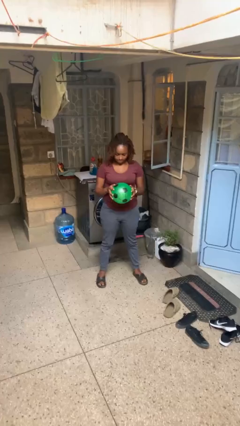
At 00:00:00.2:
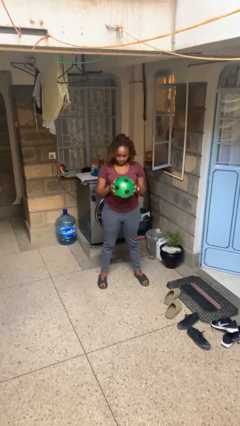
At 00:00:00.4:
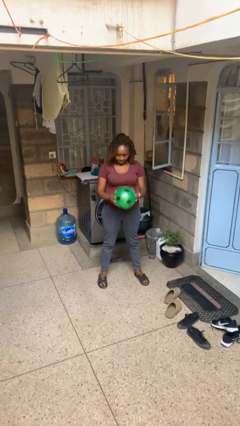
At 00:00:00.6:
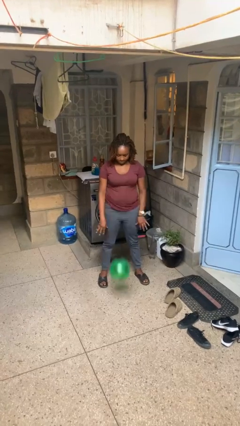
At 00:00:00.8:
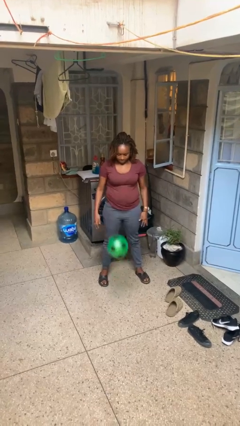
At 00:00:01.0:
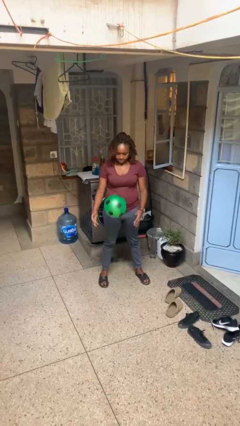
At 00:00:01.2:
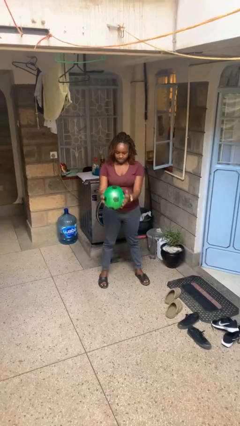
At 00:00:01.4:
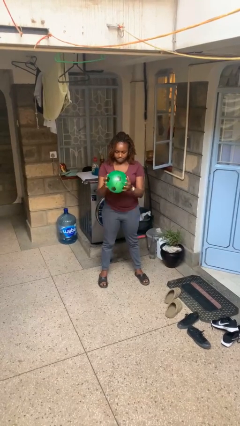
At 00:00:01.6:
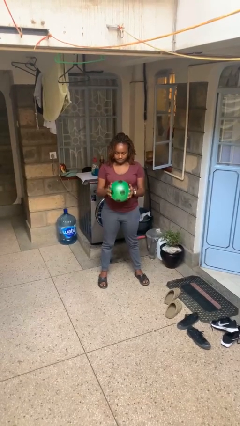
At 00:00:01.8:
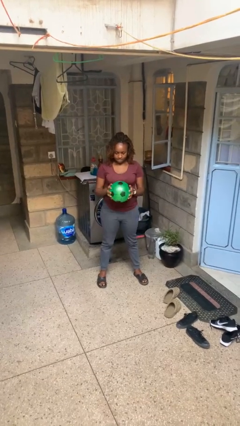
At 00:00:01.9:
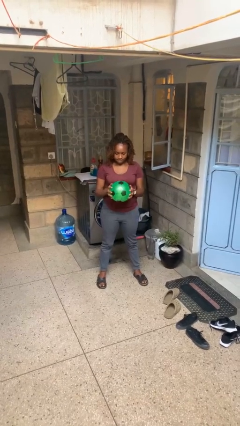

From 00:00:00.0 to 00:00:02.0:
person bounces ball on floor

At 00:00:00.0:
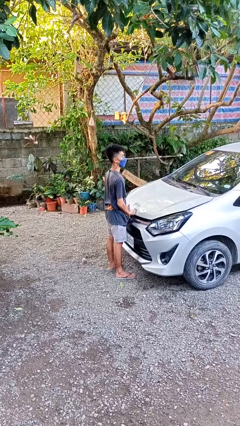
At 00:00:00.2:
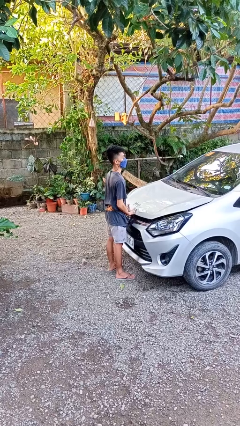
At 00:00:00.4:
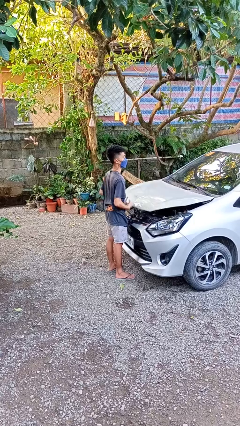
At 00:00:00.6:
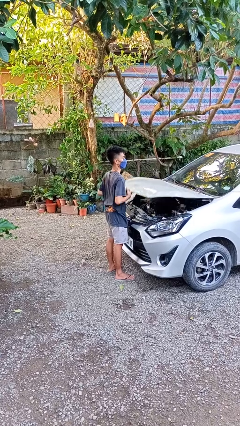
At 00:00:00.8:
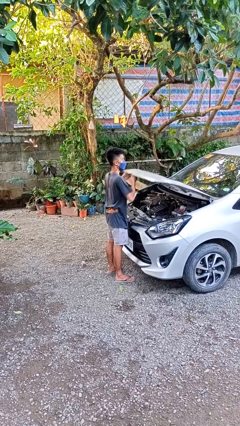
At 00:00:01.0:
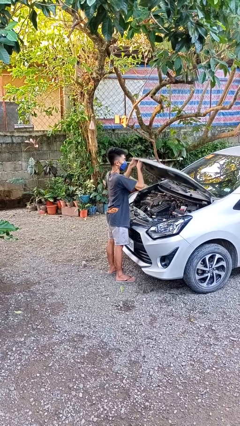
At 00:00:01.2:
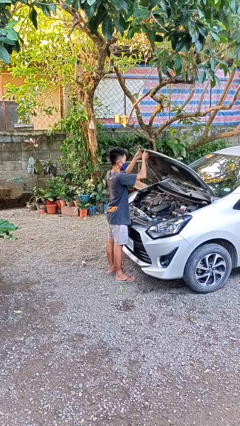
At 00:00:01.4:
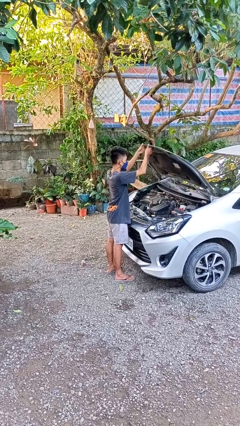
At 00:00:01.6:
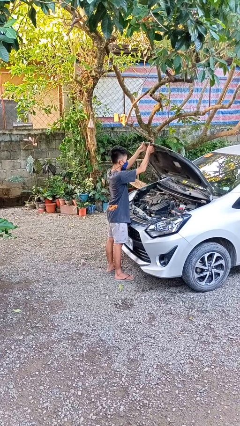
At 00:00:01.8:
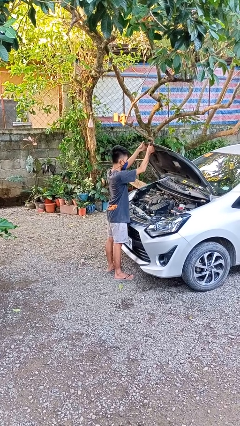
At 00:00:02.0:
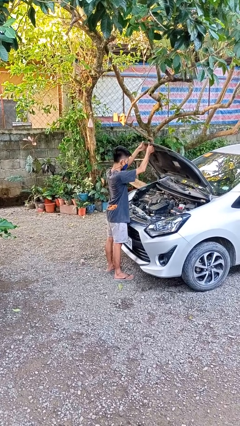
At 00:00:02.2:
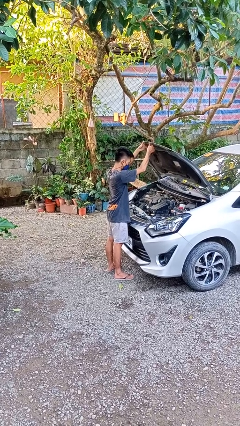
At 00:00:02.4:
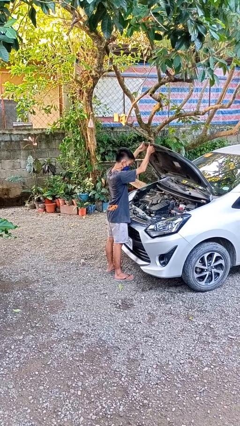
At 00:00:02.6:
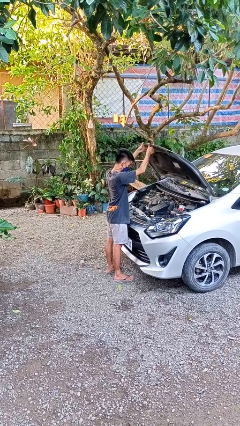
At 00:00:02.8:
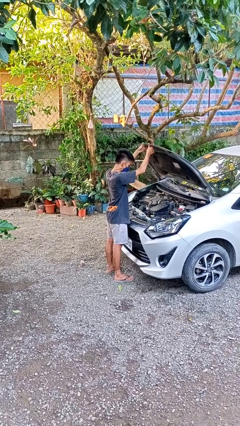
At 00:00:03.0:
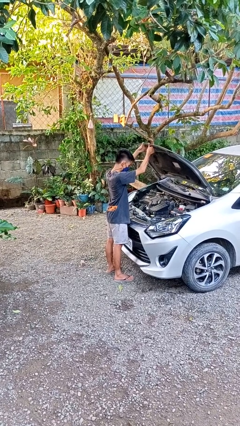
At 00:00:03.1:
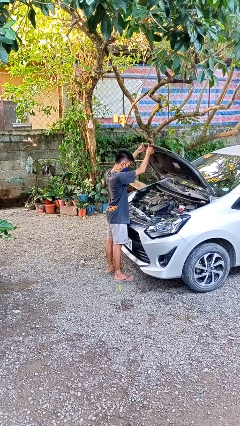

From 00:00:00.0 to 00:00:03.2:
person opens car hood

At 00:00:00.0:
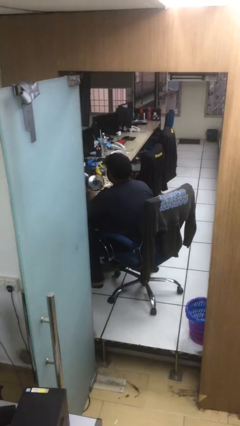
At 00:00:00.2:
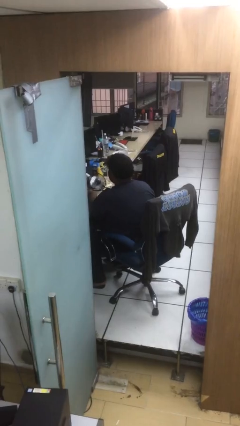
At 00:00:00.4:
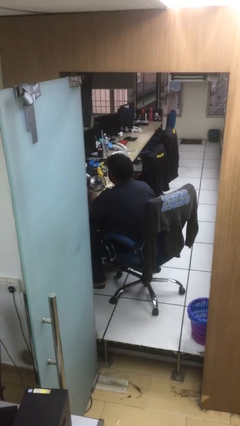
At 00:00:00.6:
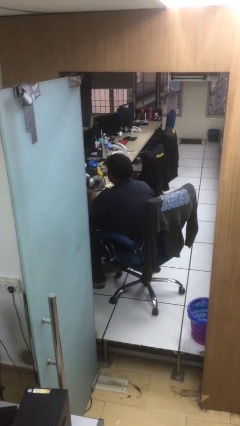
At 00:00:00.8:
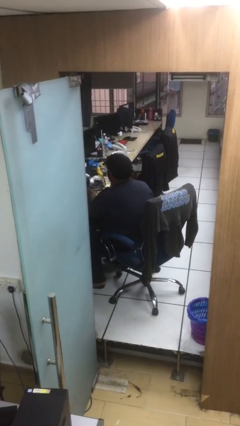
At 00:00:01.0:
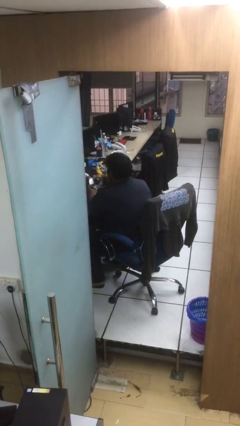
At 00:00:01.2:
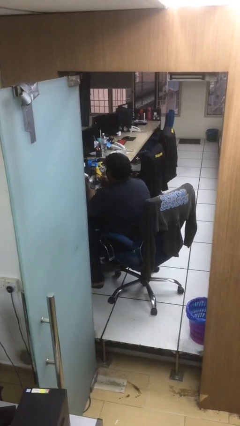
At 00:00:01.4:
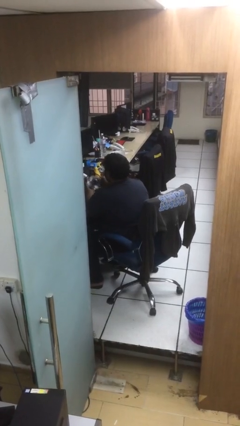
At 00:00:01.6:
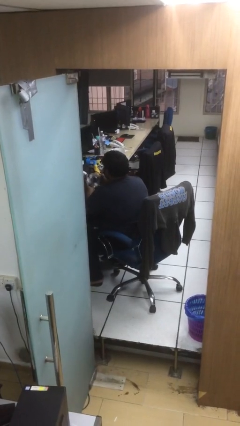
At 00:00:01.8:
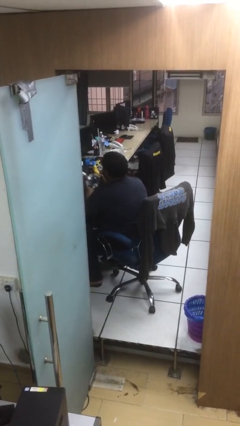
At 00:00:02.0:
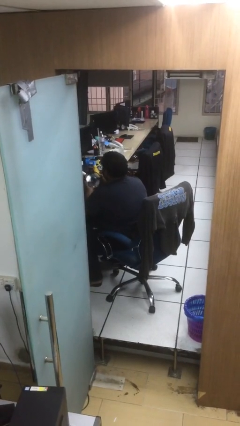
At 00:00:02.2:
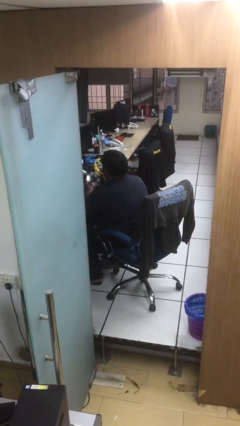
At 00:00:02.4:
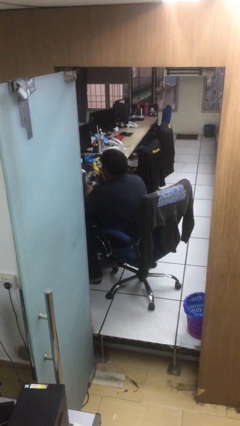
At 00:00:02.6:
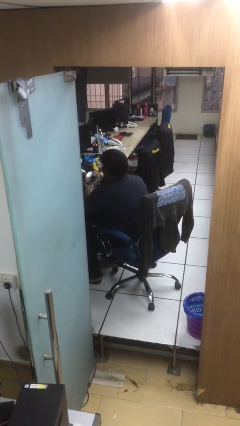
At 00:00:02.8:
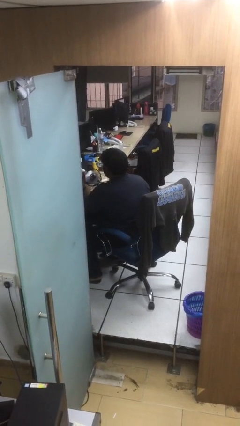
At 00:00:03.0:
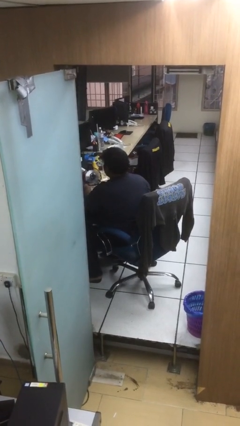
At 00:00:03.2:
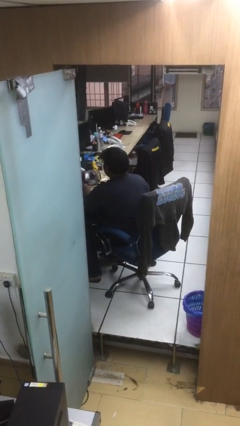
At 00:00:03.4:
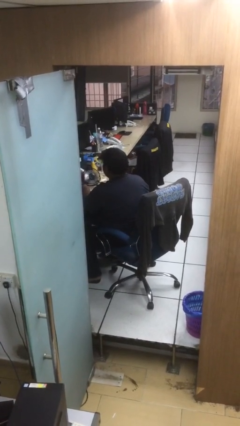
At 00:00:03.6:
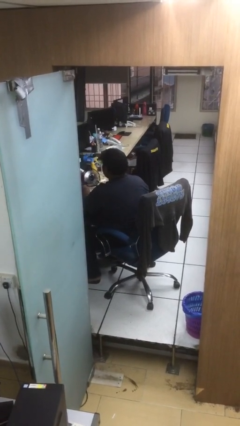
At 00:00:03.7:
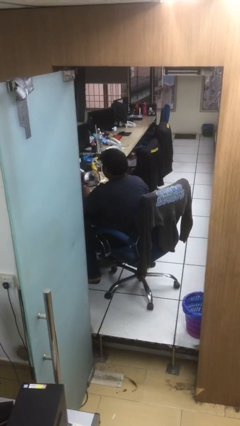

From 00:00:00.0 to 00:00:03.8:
person turns on fan

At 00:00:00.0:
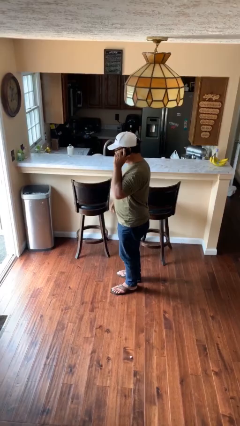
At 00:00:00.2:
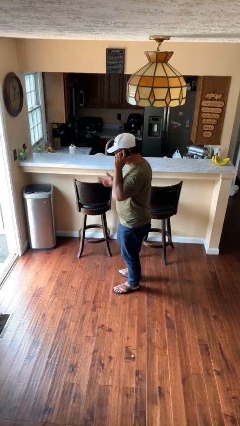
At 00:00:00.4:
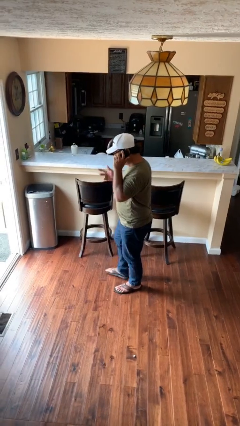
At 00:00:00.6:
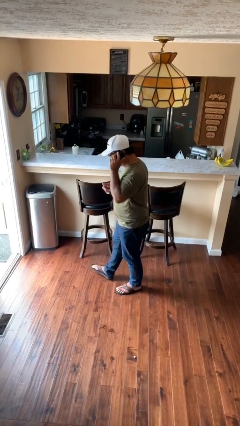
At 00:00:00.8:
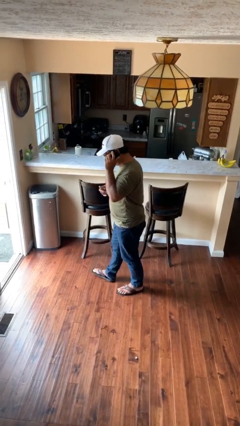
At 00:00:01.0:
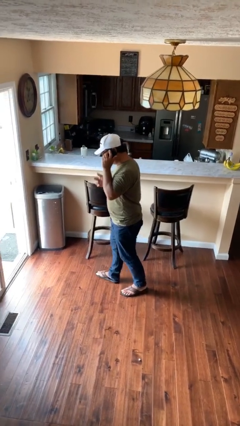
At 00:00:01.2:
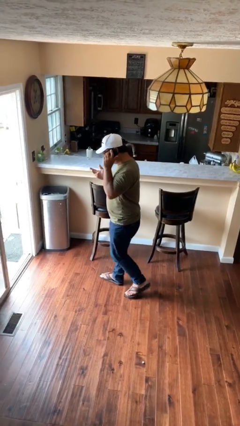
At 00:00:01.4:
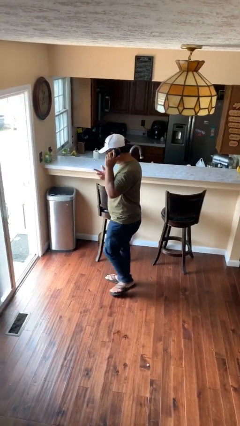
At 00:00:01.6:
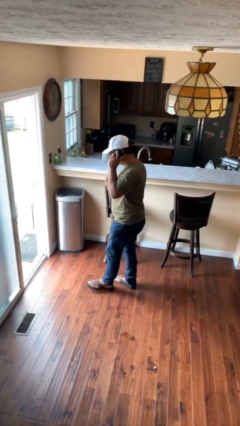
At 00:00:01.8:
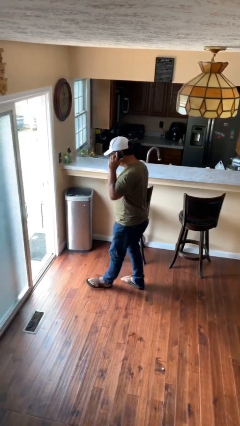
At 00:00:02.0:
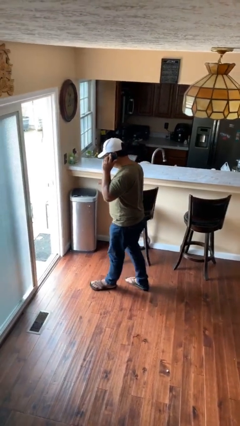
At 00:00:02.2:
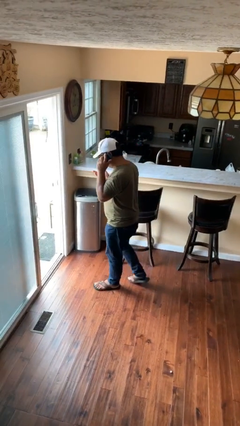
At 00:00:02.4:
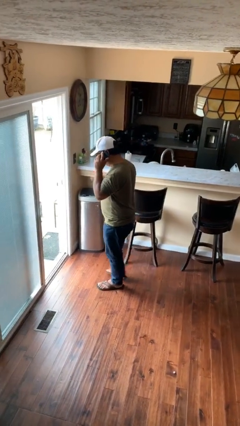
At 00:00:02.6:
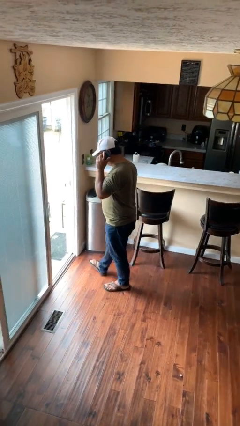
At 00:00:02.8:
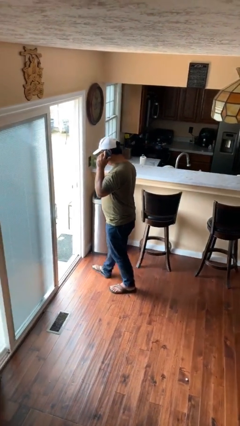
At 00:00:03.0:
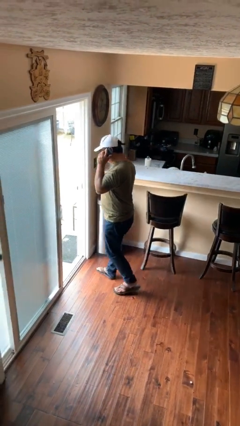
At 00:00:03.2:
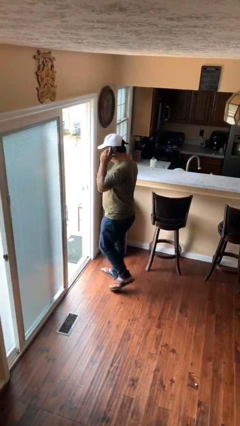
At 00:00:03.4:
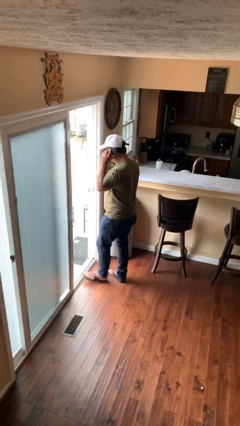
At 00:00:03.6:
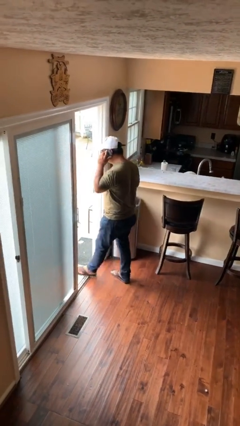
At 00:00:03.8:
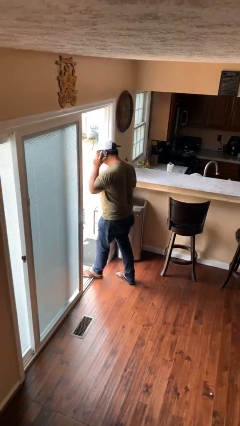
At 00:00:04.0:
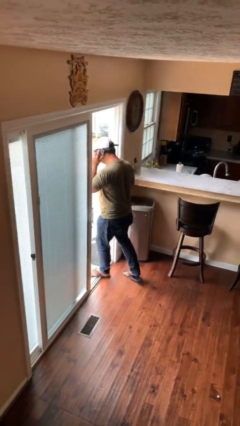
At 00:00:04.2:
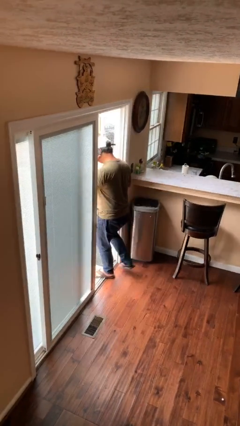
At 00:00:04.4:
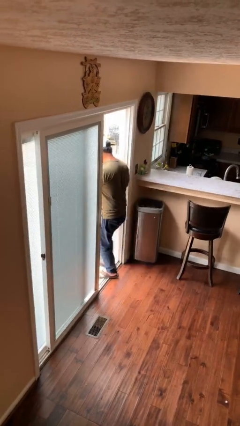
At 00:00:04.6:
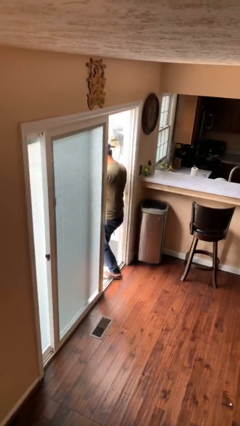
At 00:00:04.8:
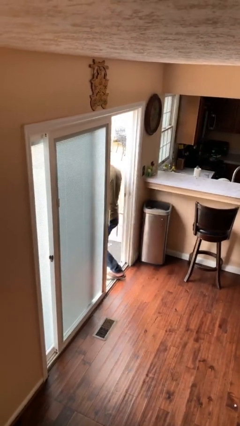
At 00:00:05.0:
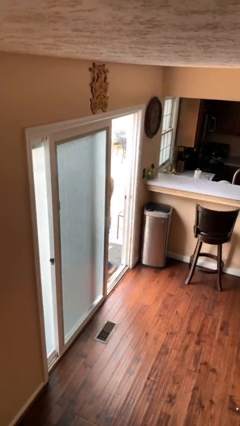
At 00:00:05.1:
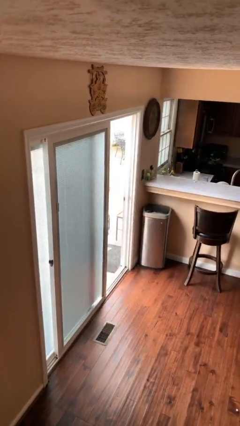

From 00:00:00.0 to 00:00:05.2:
person exits scene through structure

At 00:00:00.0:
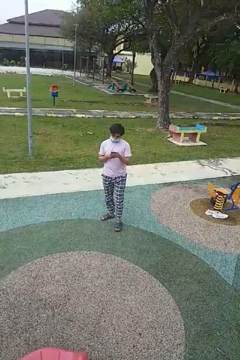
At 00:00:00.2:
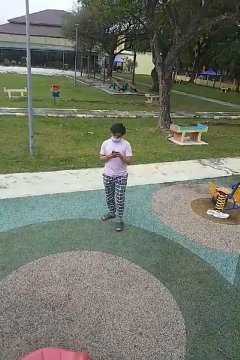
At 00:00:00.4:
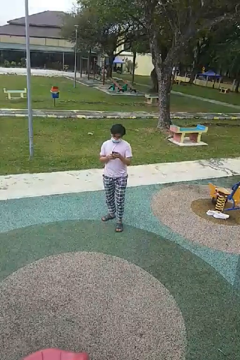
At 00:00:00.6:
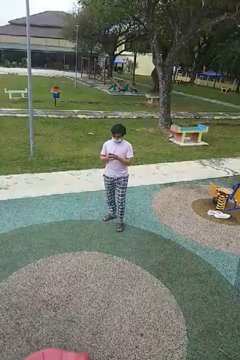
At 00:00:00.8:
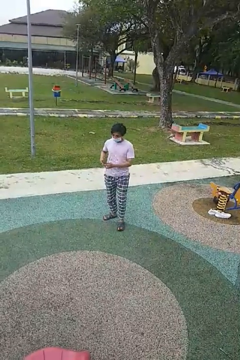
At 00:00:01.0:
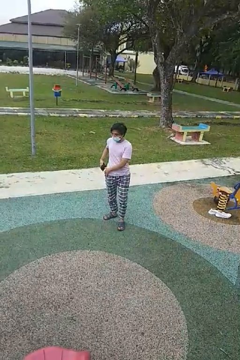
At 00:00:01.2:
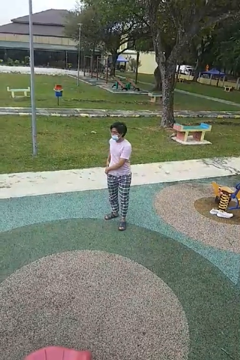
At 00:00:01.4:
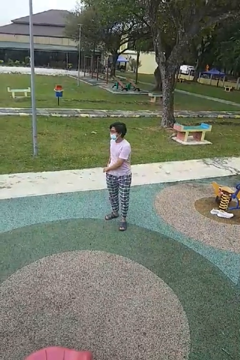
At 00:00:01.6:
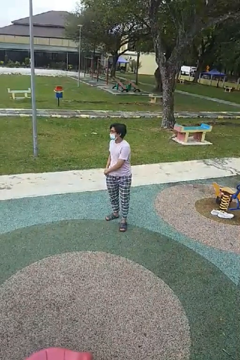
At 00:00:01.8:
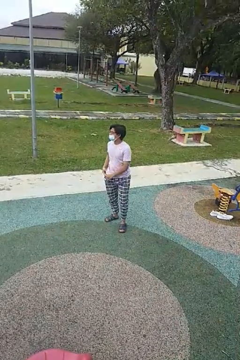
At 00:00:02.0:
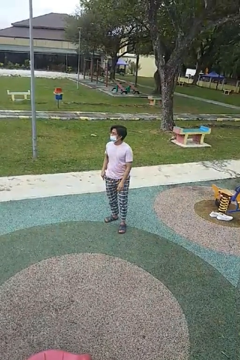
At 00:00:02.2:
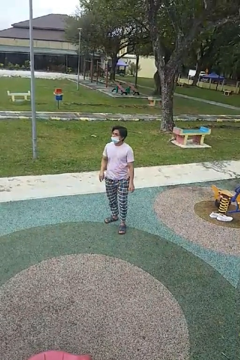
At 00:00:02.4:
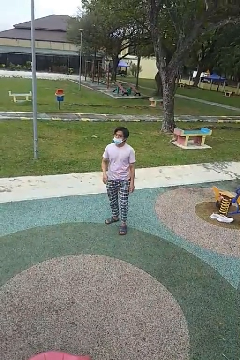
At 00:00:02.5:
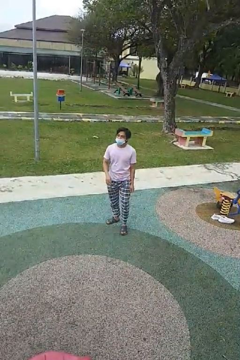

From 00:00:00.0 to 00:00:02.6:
person puts phone into pocket

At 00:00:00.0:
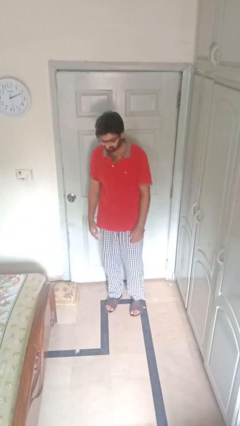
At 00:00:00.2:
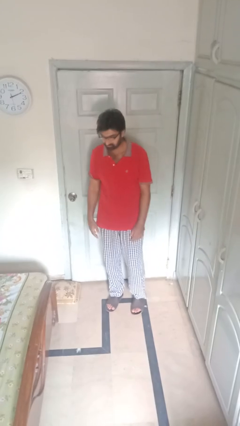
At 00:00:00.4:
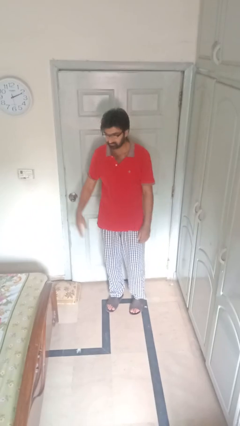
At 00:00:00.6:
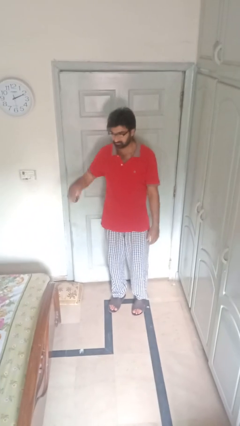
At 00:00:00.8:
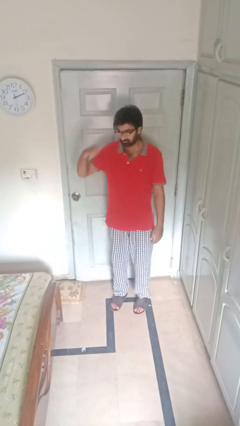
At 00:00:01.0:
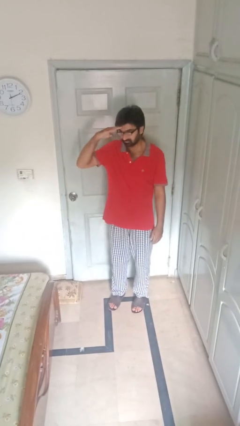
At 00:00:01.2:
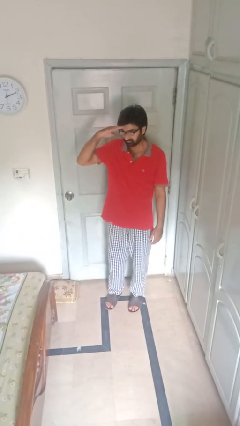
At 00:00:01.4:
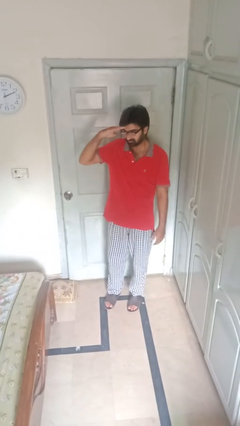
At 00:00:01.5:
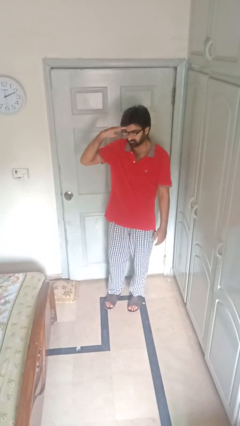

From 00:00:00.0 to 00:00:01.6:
person salutes
